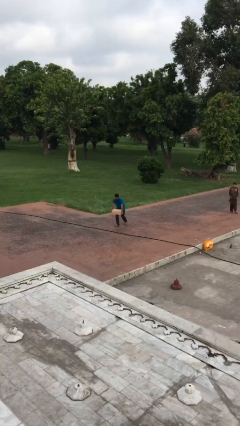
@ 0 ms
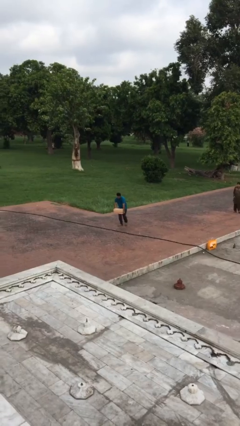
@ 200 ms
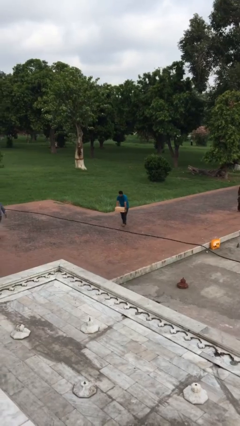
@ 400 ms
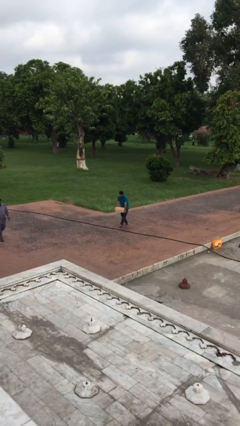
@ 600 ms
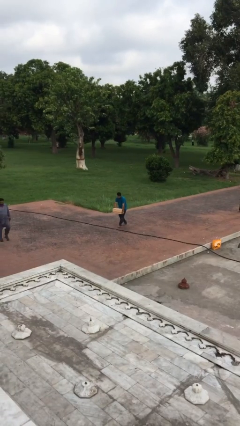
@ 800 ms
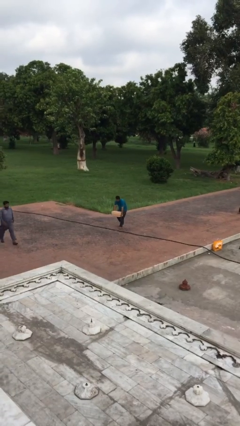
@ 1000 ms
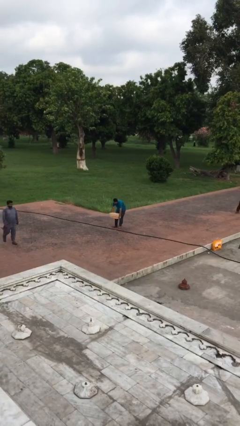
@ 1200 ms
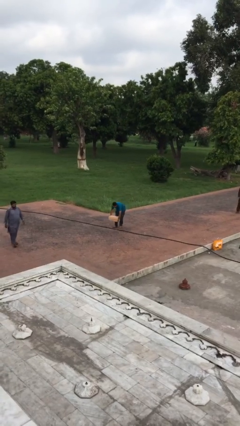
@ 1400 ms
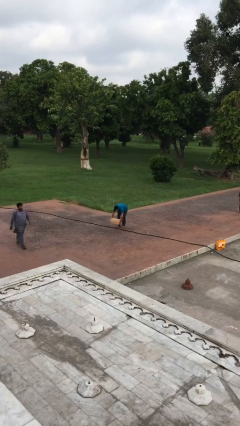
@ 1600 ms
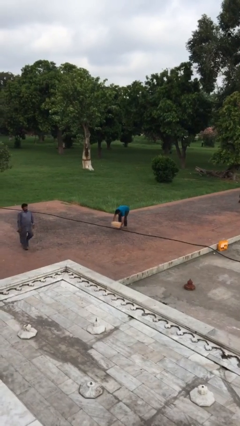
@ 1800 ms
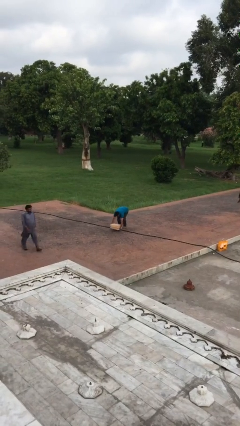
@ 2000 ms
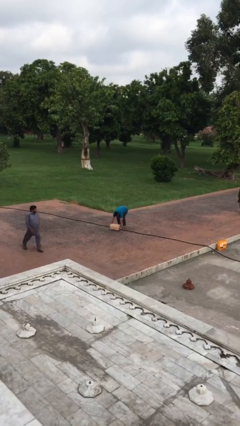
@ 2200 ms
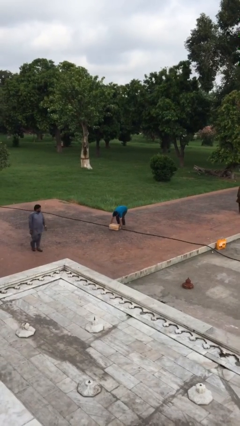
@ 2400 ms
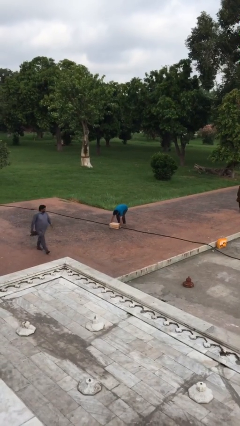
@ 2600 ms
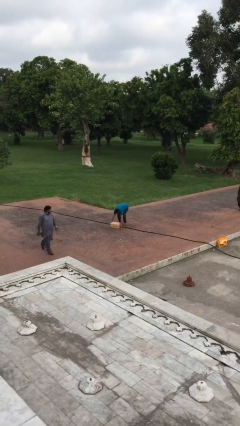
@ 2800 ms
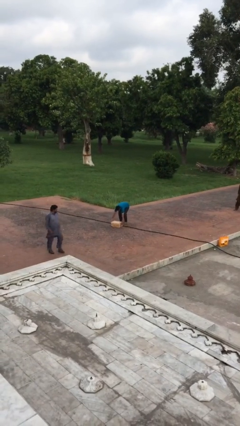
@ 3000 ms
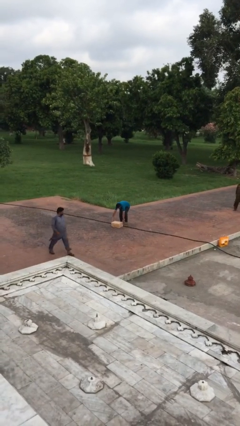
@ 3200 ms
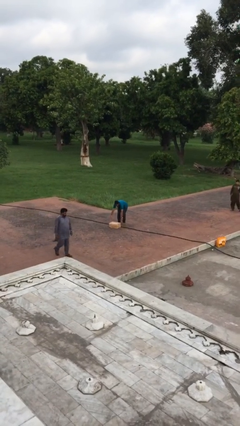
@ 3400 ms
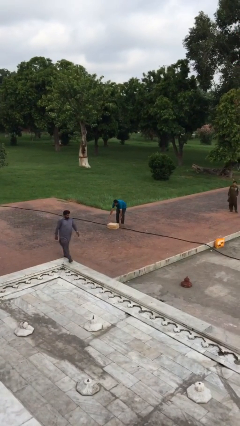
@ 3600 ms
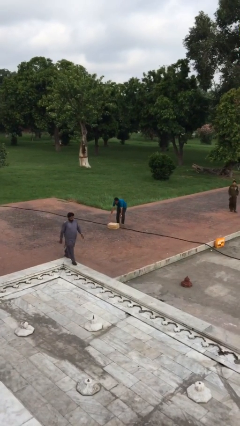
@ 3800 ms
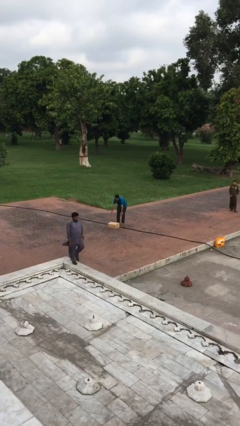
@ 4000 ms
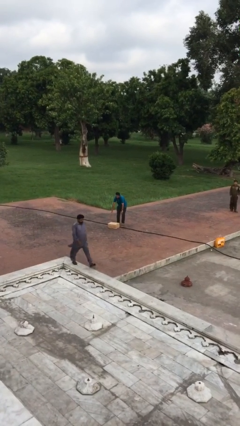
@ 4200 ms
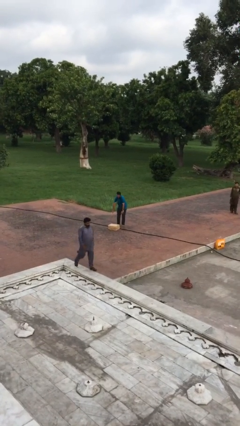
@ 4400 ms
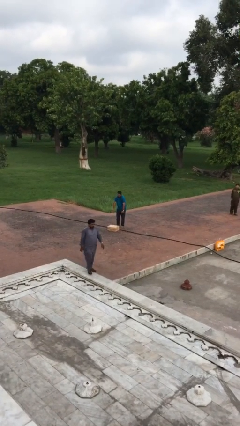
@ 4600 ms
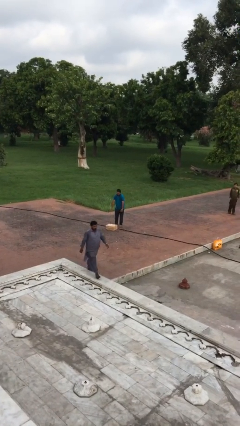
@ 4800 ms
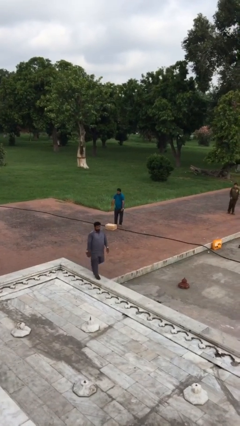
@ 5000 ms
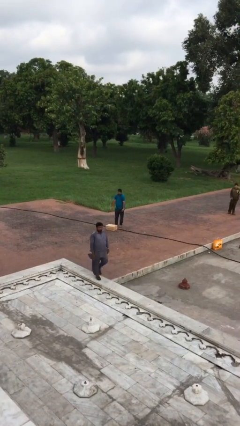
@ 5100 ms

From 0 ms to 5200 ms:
person puts down object on floor

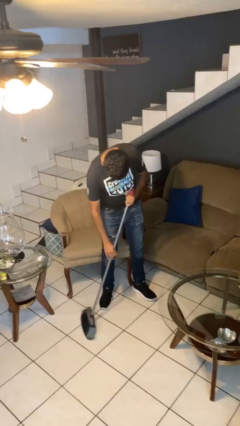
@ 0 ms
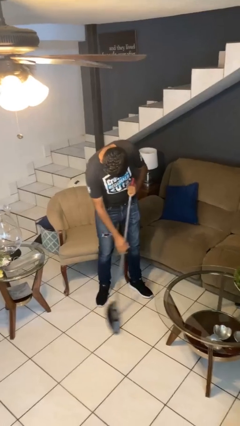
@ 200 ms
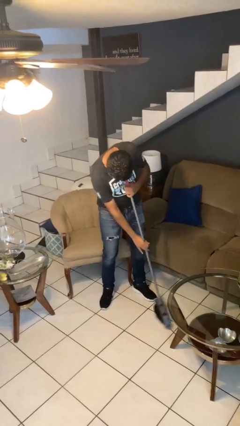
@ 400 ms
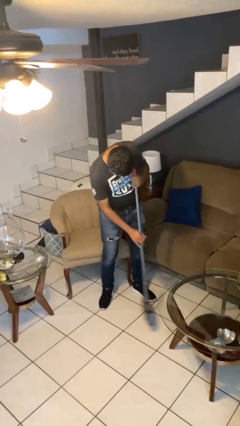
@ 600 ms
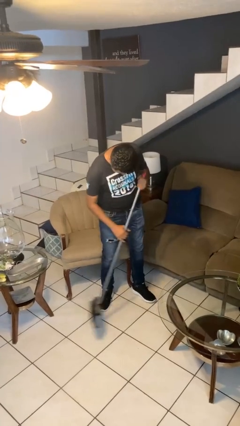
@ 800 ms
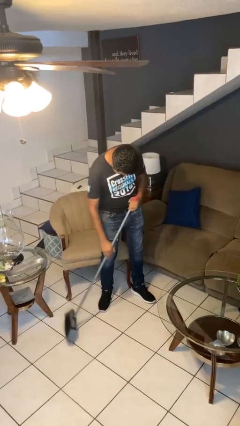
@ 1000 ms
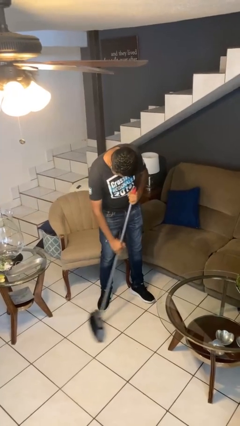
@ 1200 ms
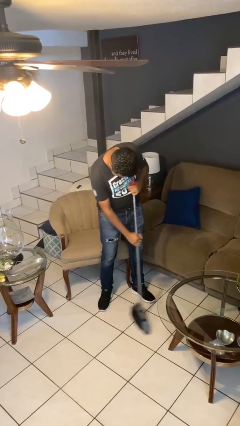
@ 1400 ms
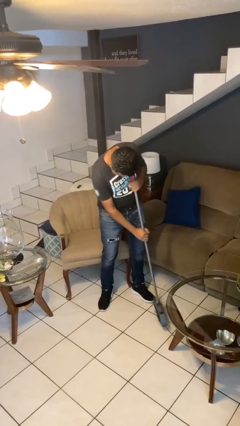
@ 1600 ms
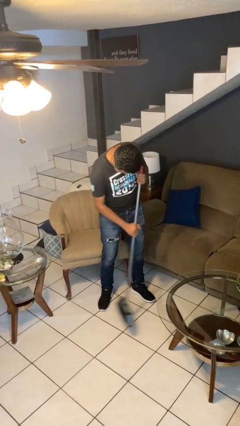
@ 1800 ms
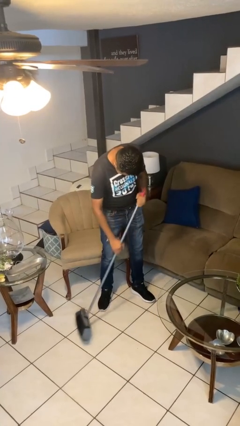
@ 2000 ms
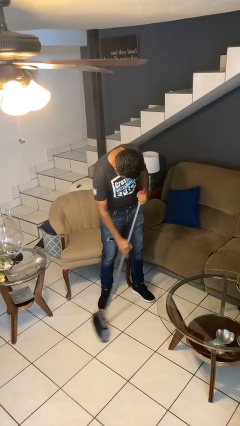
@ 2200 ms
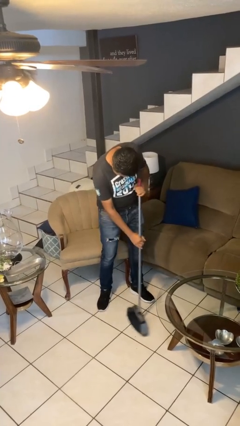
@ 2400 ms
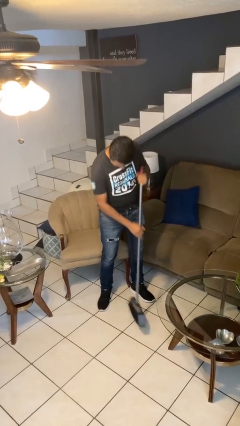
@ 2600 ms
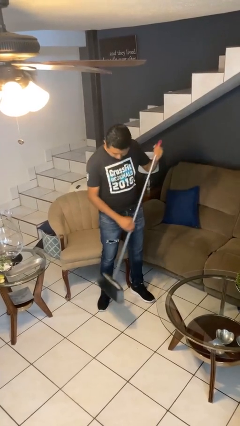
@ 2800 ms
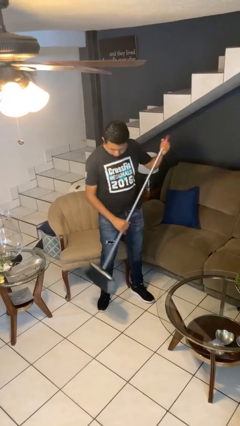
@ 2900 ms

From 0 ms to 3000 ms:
person sweeps floor

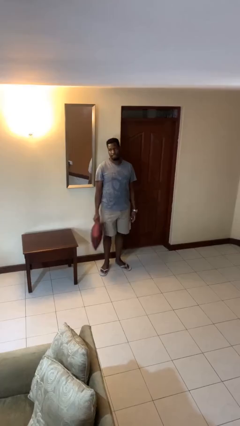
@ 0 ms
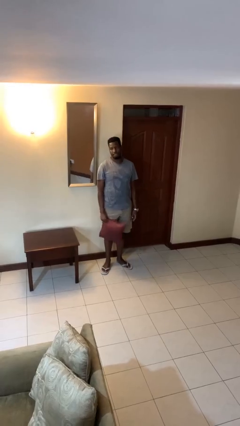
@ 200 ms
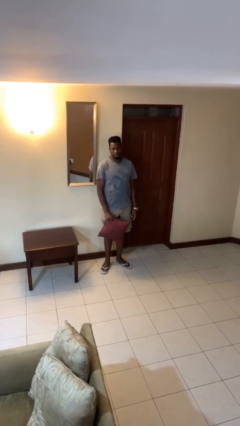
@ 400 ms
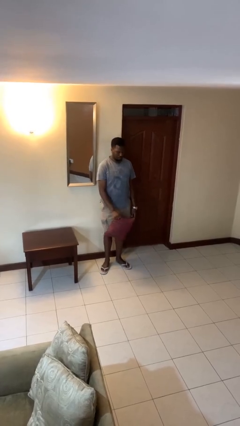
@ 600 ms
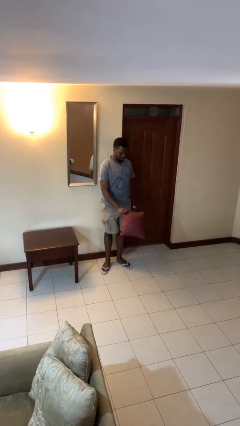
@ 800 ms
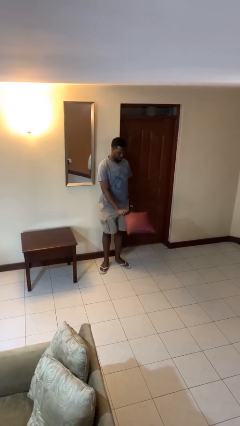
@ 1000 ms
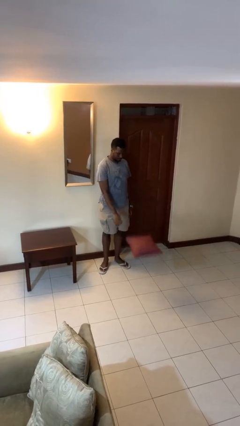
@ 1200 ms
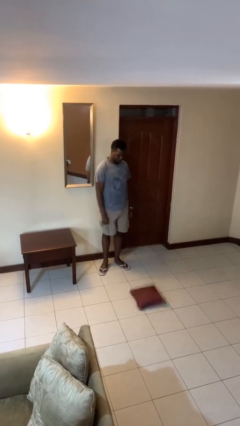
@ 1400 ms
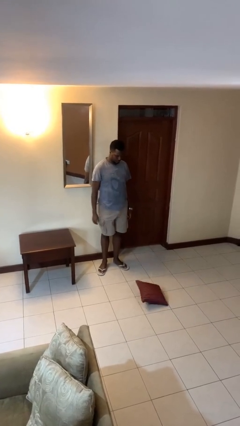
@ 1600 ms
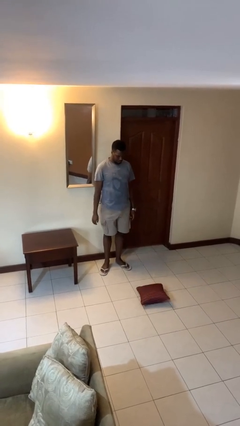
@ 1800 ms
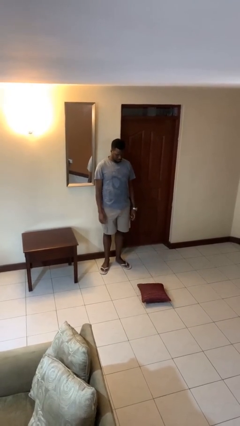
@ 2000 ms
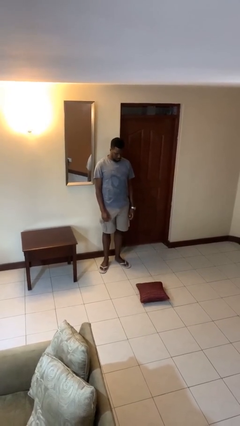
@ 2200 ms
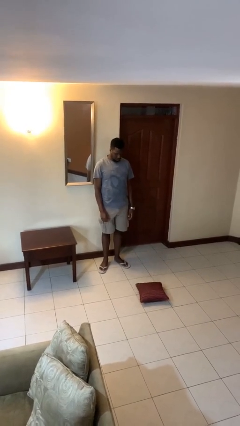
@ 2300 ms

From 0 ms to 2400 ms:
person throws object to ground

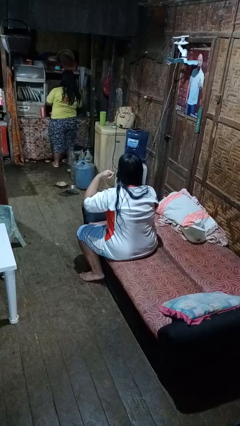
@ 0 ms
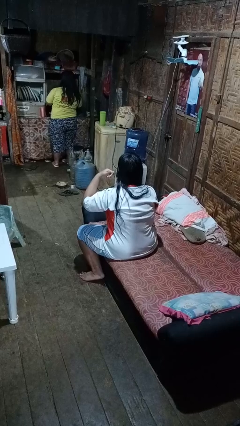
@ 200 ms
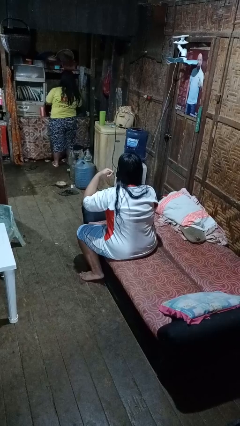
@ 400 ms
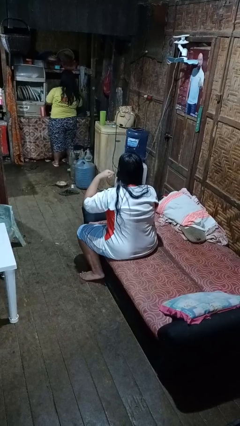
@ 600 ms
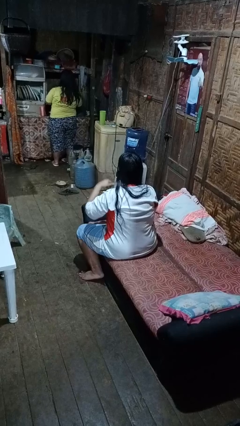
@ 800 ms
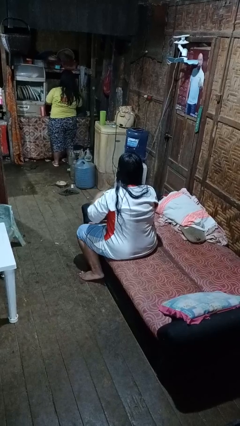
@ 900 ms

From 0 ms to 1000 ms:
person gestures call me

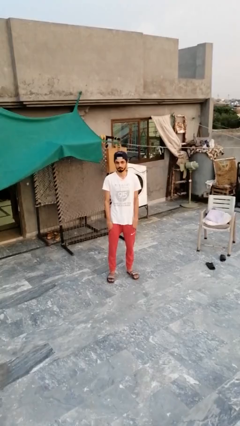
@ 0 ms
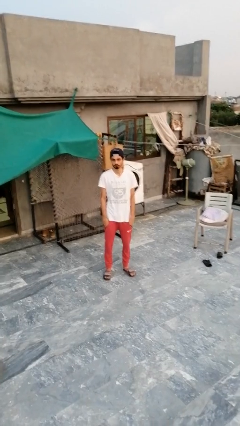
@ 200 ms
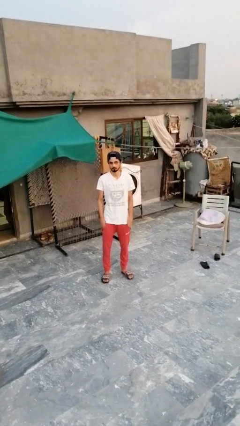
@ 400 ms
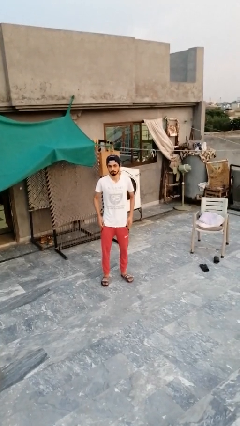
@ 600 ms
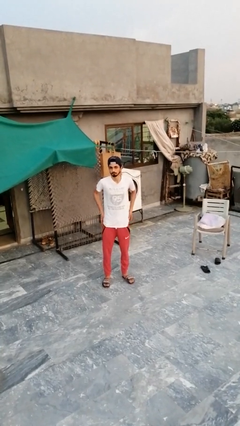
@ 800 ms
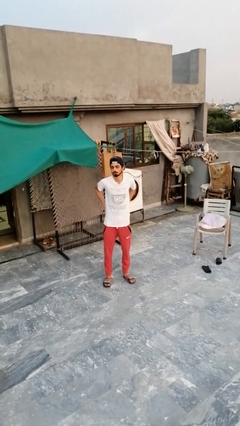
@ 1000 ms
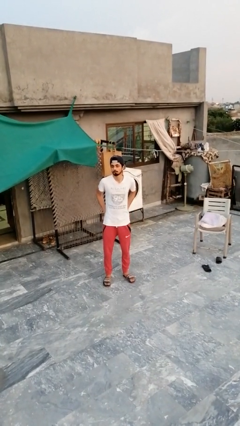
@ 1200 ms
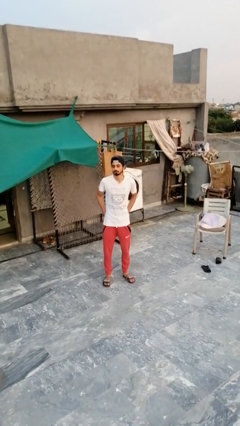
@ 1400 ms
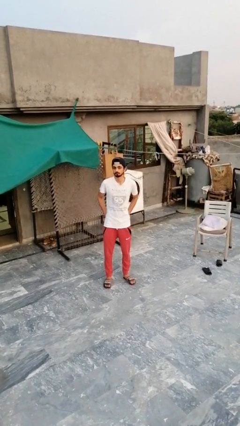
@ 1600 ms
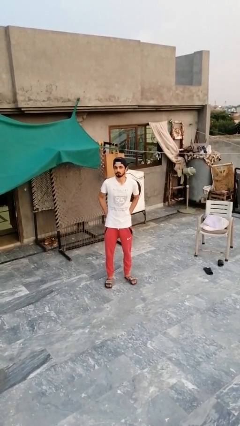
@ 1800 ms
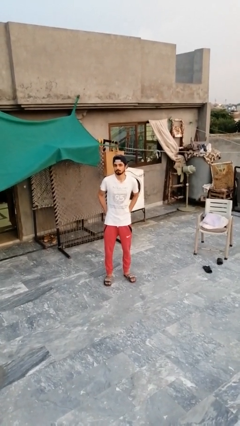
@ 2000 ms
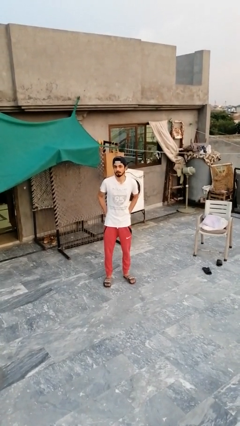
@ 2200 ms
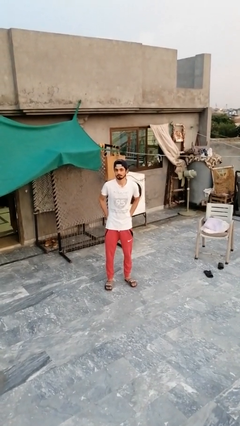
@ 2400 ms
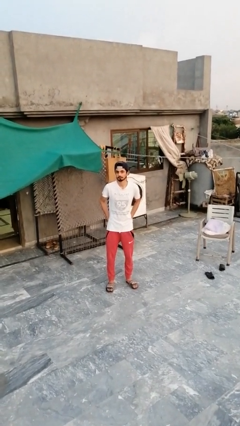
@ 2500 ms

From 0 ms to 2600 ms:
person puts hands in back pockets

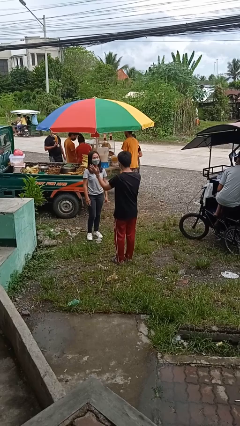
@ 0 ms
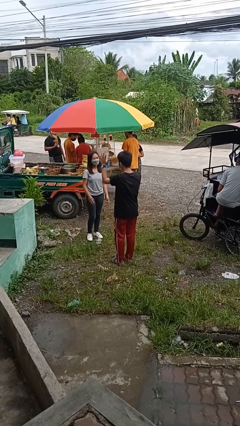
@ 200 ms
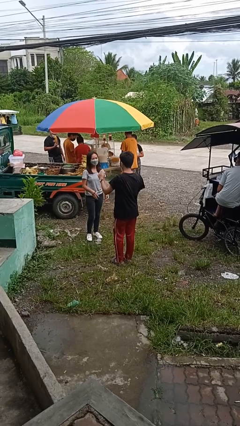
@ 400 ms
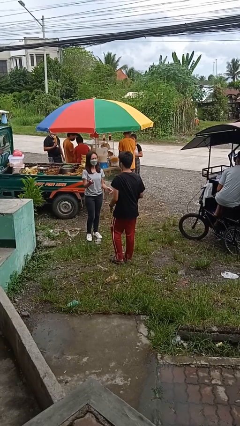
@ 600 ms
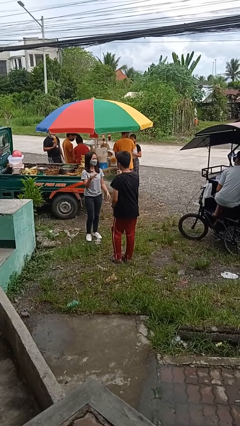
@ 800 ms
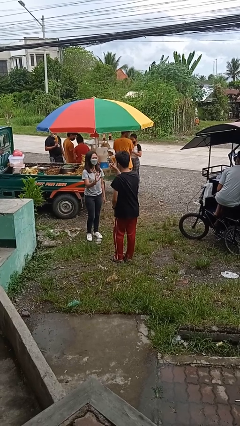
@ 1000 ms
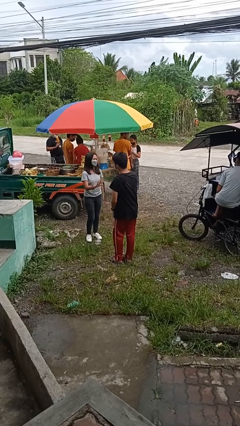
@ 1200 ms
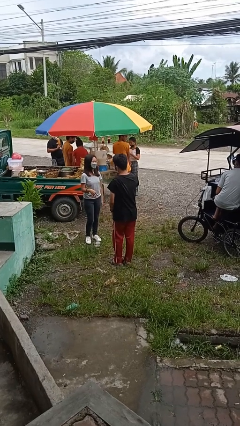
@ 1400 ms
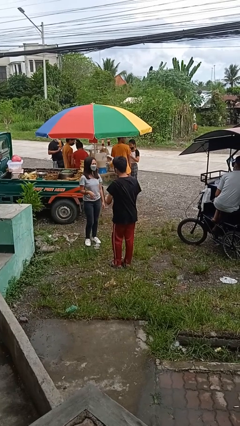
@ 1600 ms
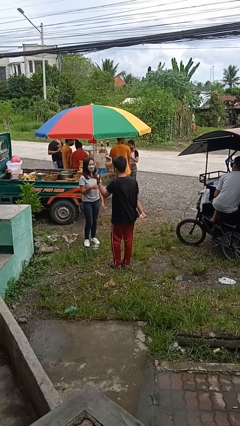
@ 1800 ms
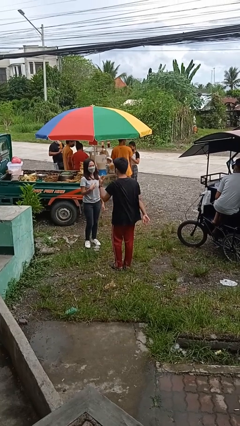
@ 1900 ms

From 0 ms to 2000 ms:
person talks to person

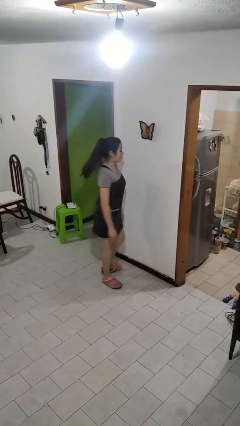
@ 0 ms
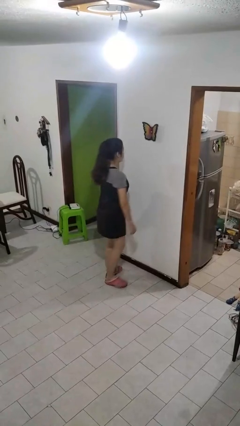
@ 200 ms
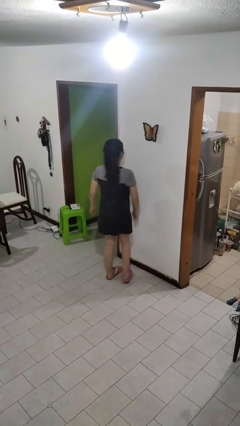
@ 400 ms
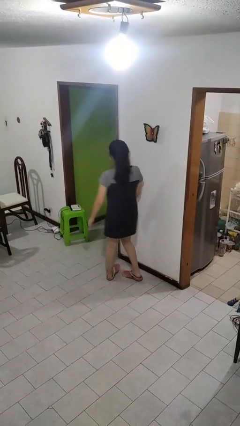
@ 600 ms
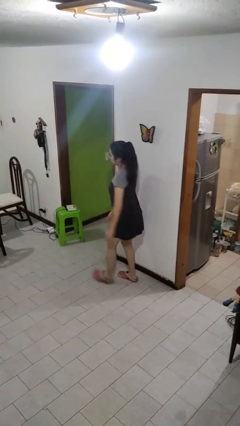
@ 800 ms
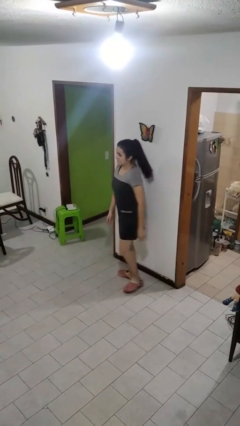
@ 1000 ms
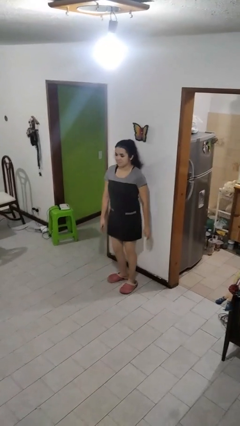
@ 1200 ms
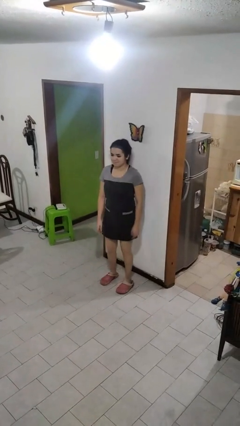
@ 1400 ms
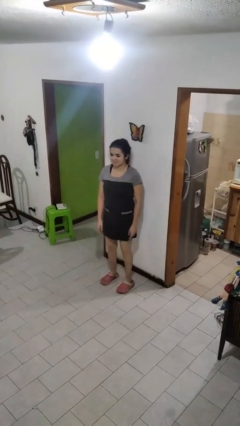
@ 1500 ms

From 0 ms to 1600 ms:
person twirls
